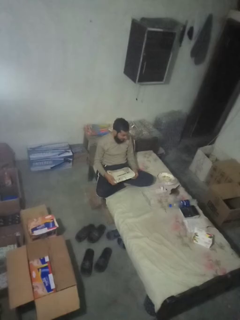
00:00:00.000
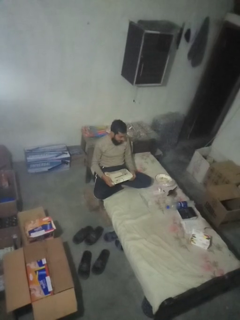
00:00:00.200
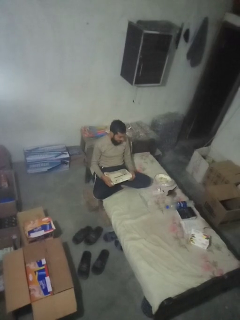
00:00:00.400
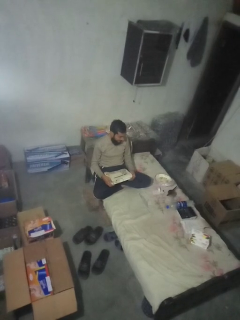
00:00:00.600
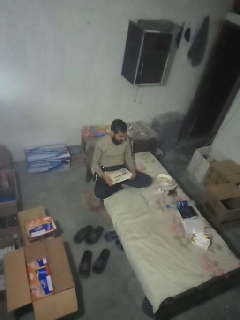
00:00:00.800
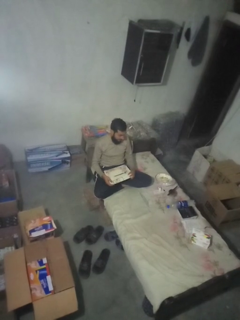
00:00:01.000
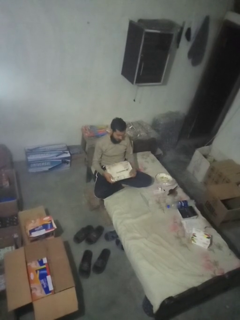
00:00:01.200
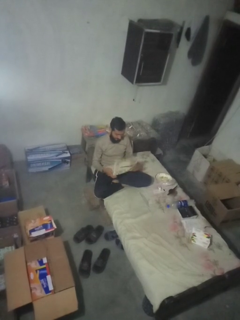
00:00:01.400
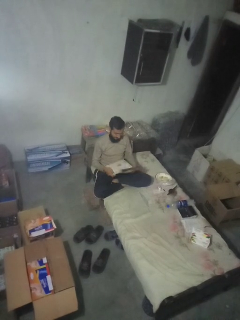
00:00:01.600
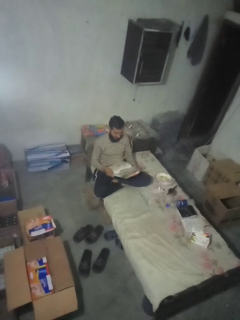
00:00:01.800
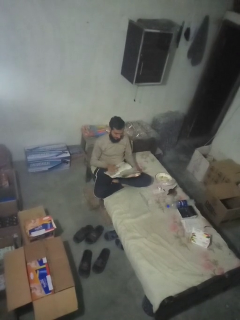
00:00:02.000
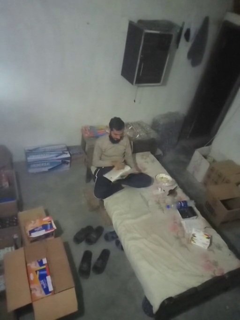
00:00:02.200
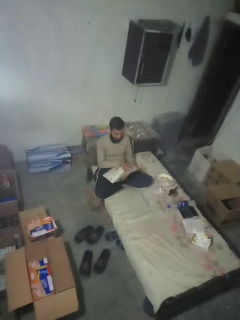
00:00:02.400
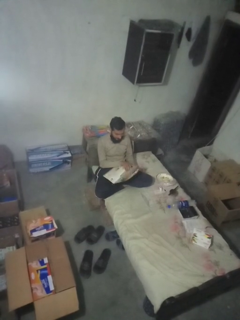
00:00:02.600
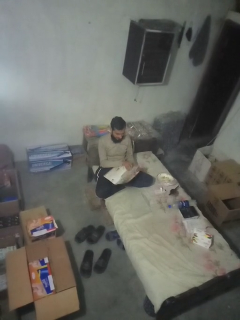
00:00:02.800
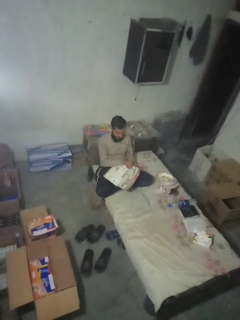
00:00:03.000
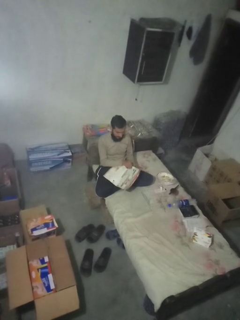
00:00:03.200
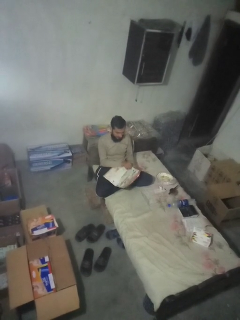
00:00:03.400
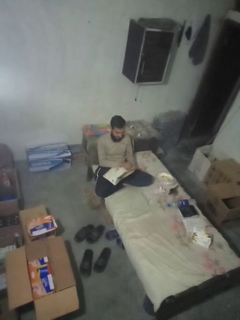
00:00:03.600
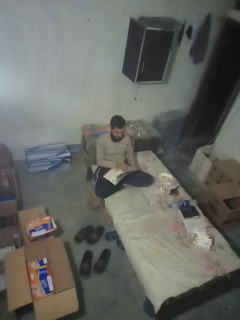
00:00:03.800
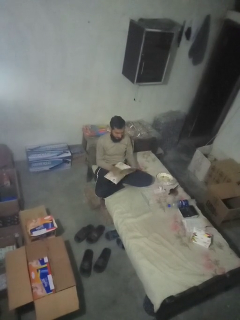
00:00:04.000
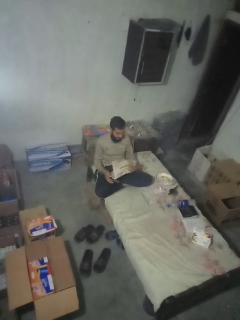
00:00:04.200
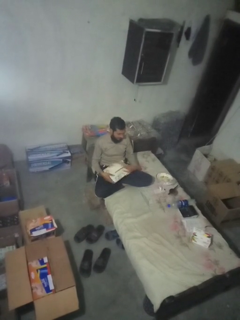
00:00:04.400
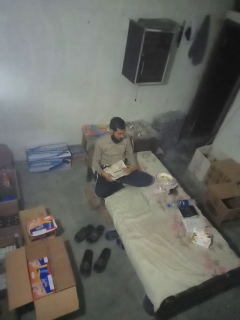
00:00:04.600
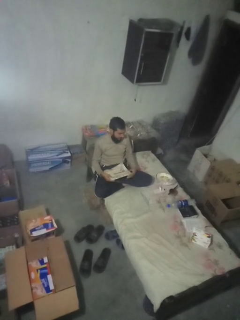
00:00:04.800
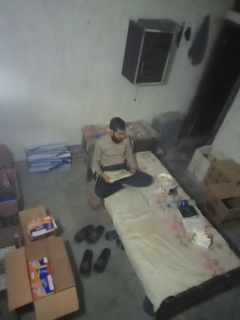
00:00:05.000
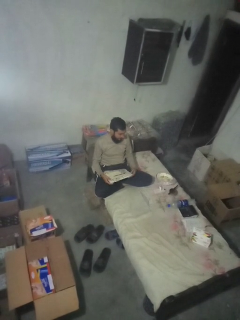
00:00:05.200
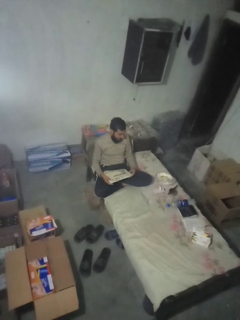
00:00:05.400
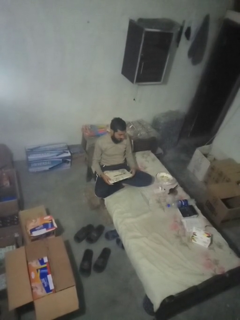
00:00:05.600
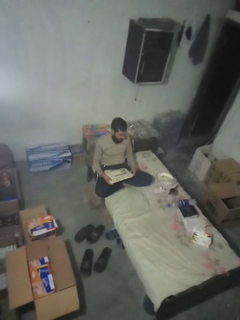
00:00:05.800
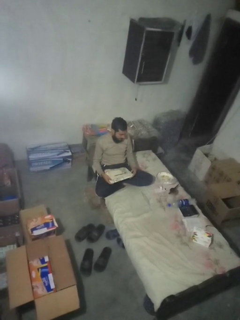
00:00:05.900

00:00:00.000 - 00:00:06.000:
person reads magazine

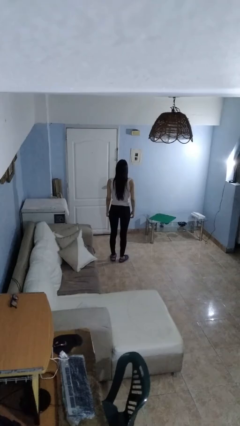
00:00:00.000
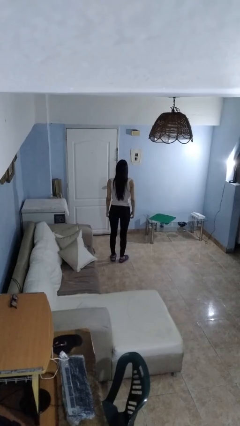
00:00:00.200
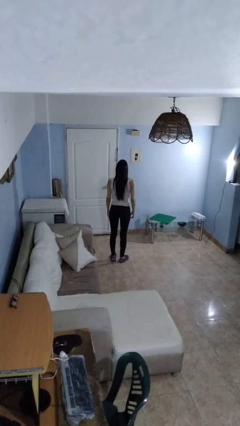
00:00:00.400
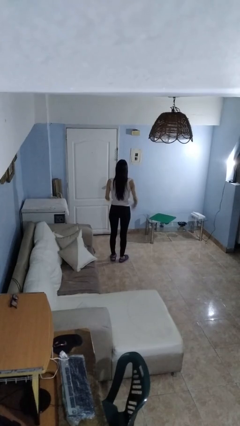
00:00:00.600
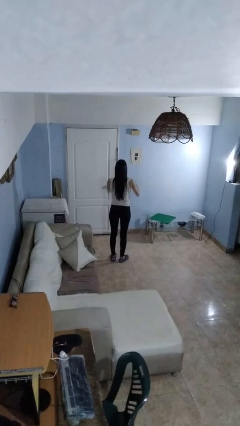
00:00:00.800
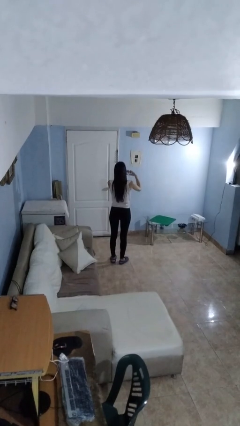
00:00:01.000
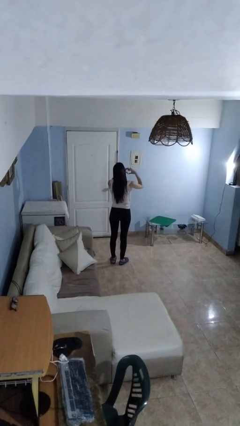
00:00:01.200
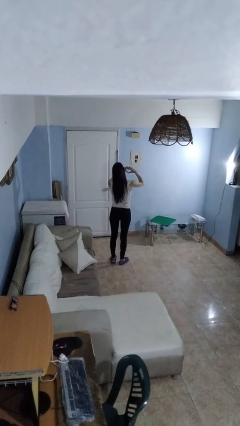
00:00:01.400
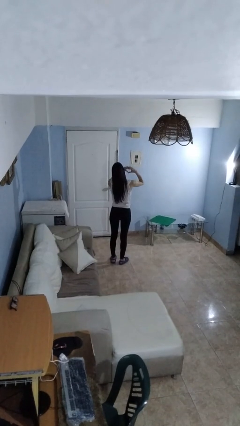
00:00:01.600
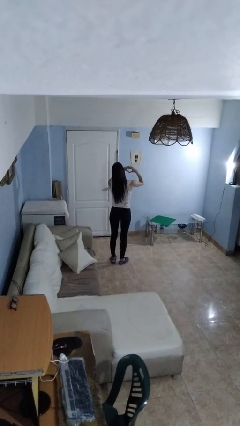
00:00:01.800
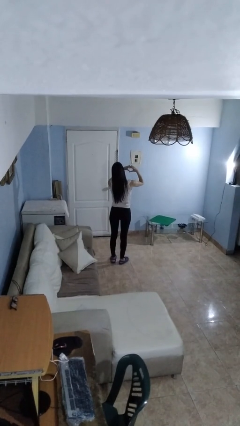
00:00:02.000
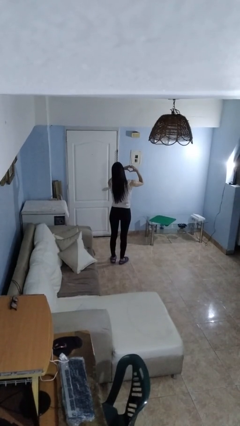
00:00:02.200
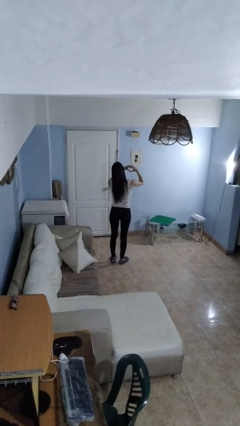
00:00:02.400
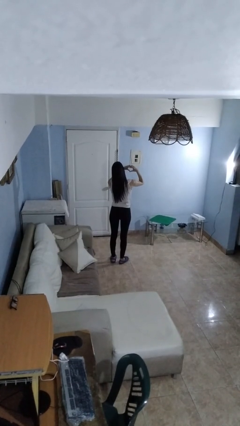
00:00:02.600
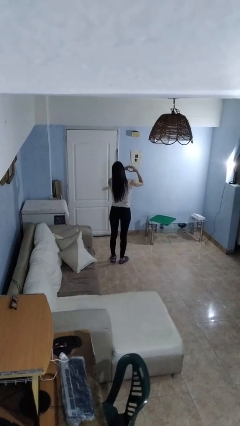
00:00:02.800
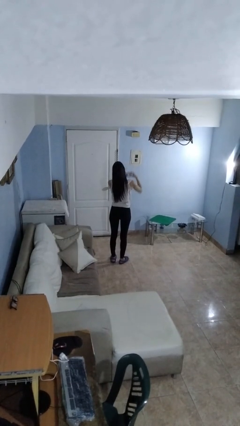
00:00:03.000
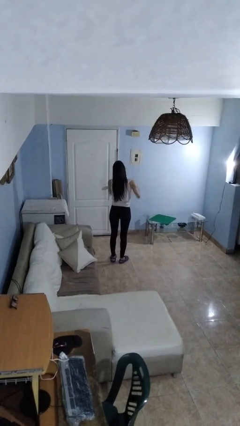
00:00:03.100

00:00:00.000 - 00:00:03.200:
person gestures heart

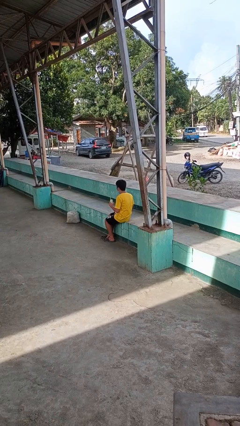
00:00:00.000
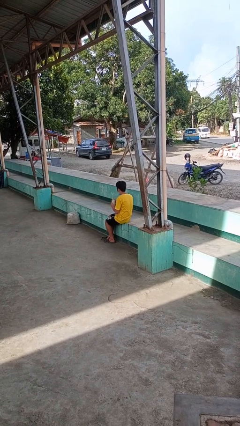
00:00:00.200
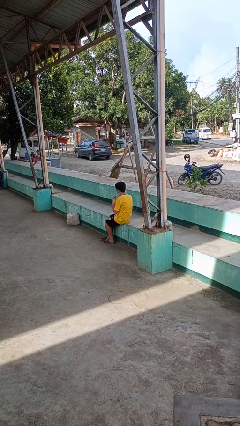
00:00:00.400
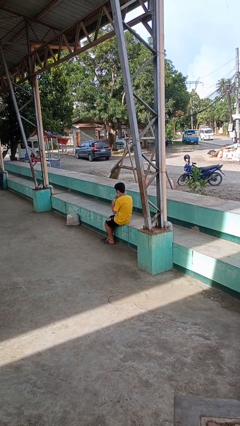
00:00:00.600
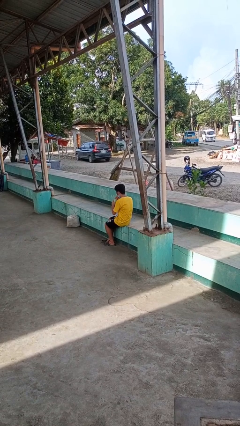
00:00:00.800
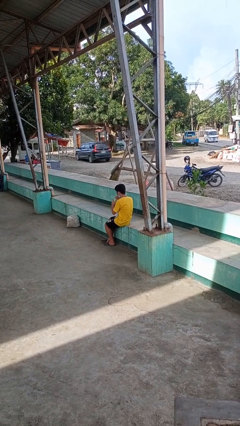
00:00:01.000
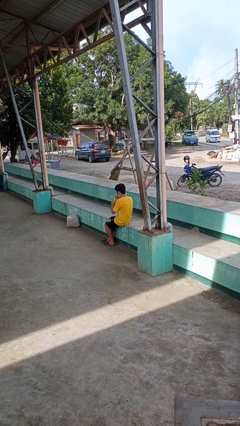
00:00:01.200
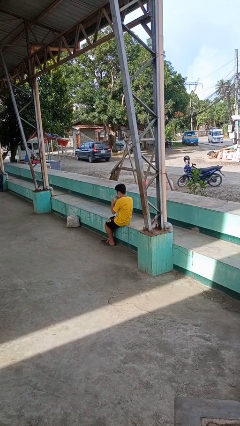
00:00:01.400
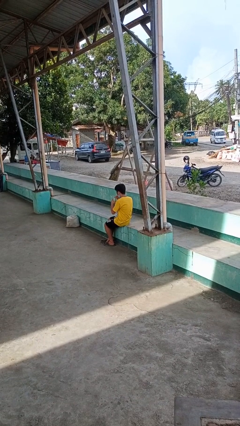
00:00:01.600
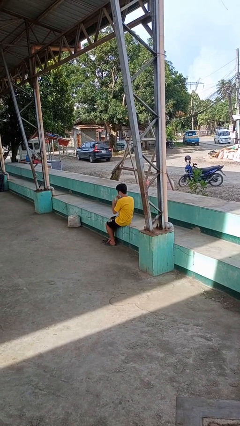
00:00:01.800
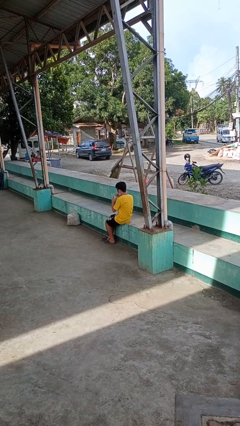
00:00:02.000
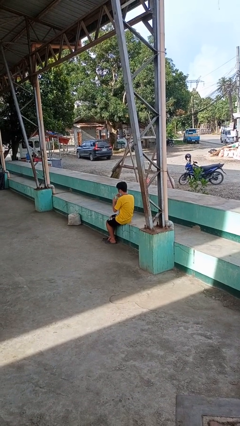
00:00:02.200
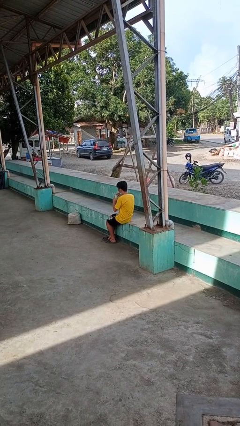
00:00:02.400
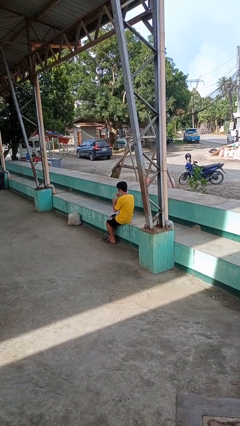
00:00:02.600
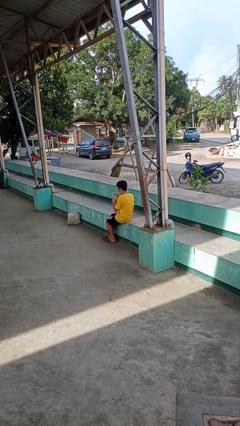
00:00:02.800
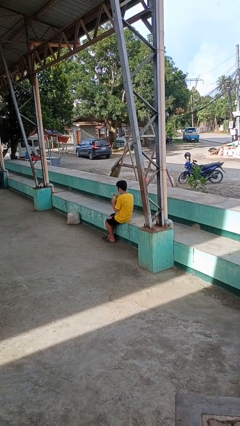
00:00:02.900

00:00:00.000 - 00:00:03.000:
person drinks from straw

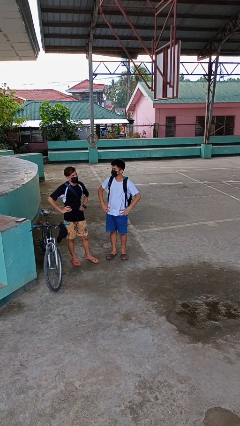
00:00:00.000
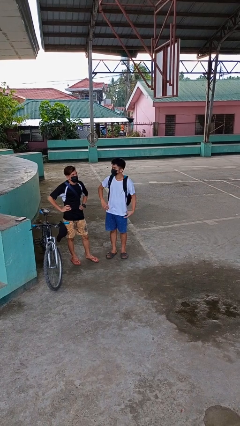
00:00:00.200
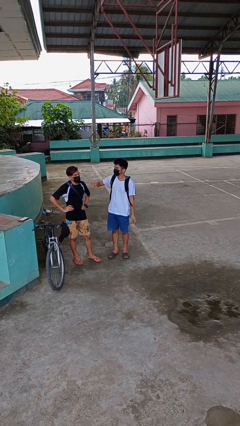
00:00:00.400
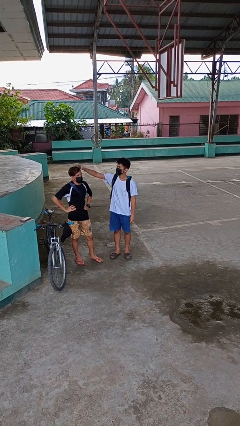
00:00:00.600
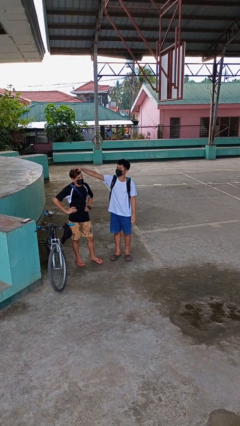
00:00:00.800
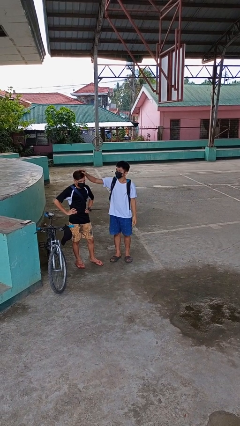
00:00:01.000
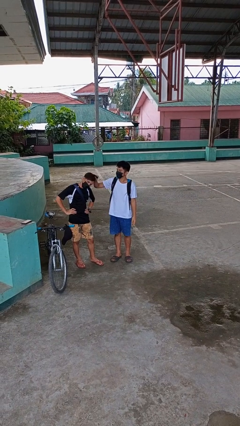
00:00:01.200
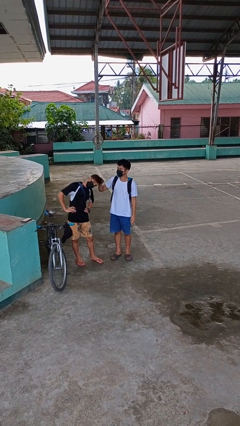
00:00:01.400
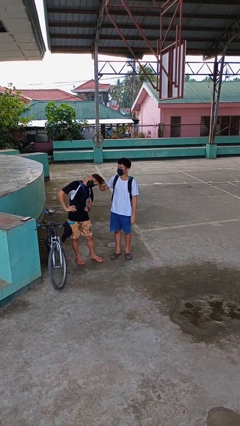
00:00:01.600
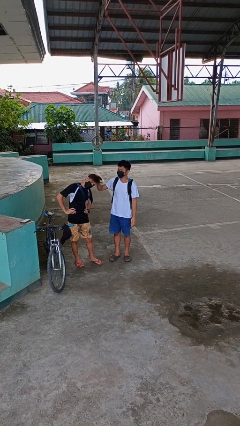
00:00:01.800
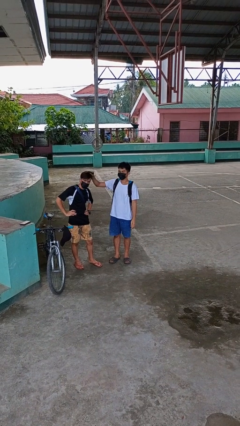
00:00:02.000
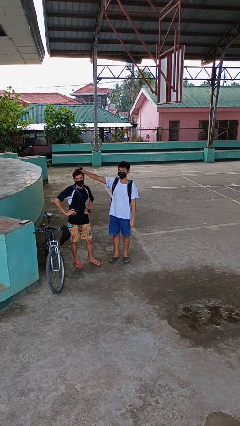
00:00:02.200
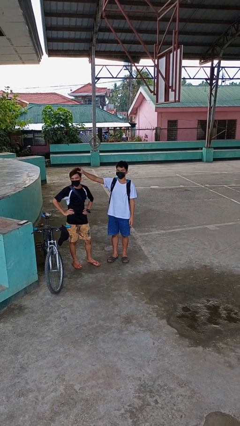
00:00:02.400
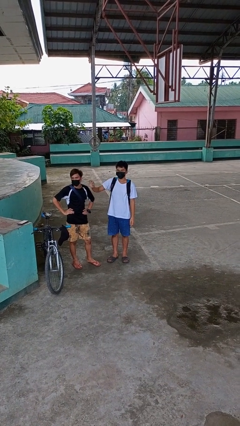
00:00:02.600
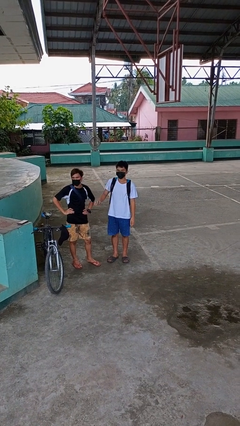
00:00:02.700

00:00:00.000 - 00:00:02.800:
person grabs person by hair

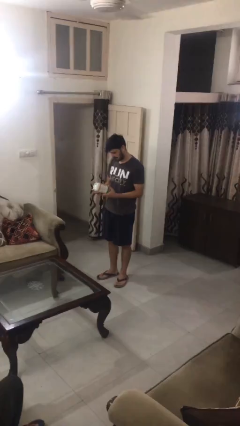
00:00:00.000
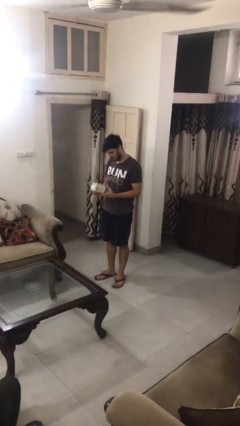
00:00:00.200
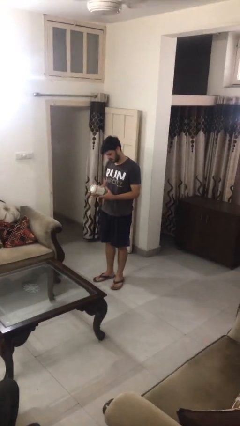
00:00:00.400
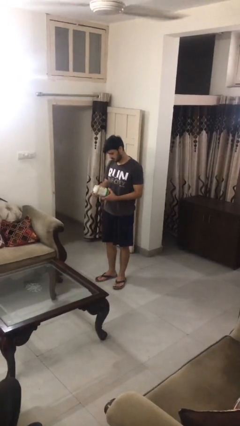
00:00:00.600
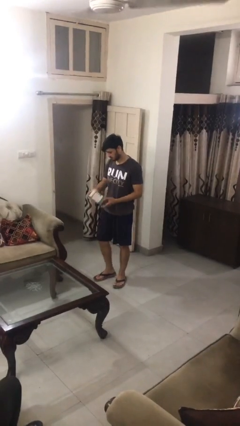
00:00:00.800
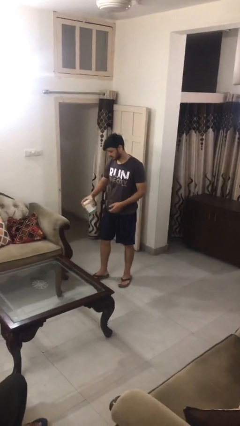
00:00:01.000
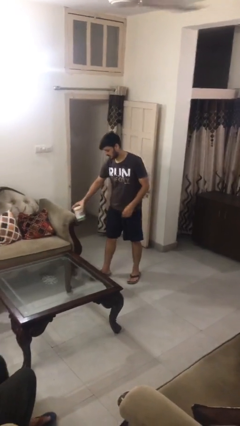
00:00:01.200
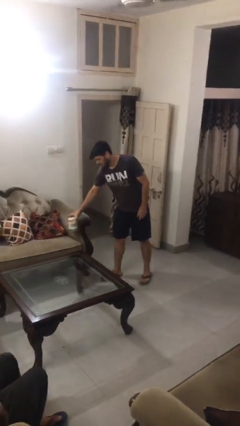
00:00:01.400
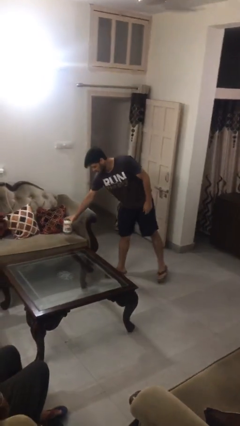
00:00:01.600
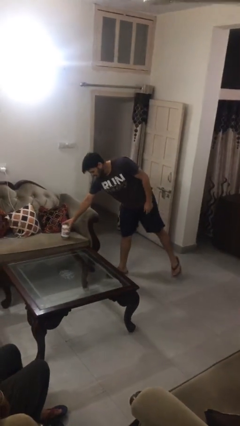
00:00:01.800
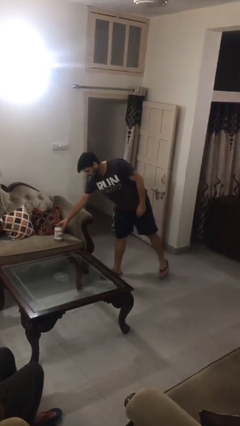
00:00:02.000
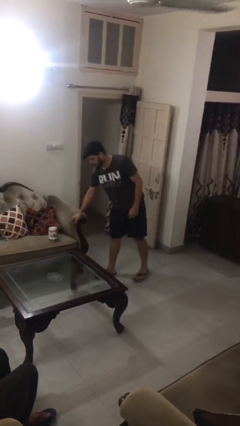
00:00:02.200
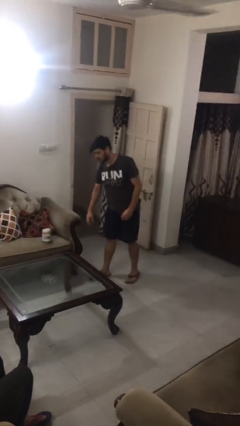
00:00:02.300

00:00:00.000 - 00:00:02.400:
person puts down object on couch

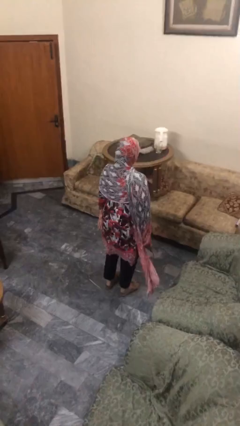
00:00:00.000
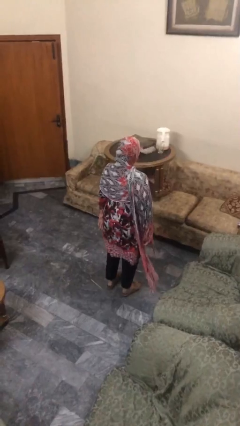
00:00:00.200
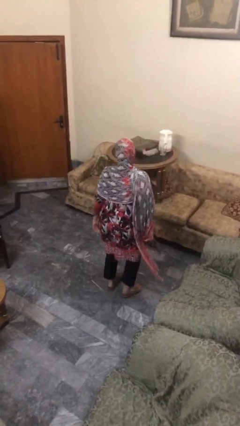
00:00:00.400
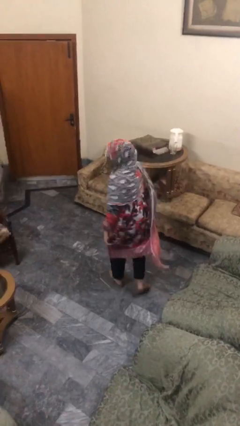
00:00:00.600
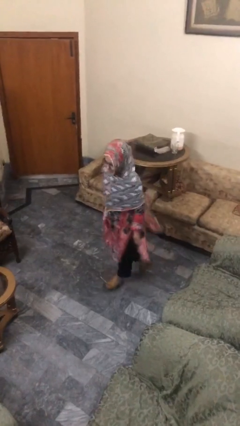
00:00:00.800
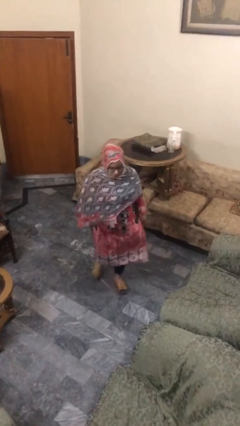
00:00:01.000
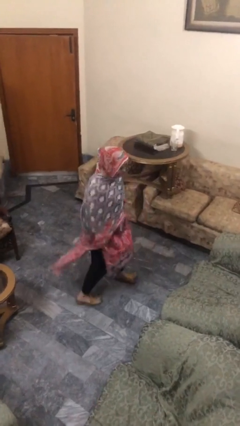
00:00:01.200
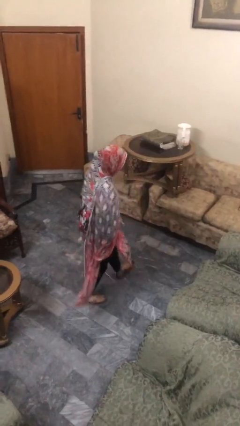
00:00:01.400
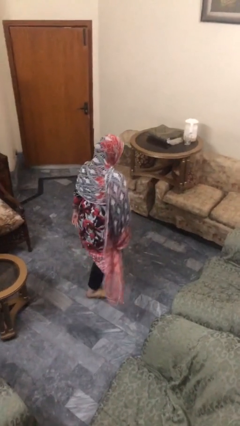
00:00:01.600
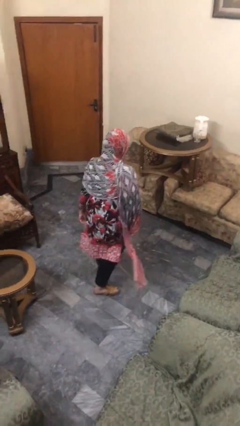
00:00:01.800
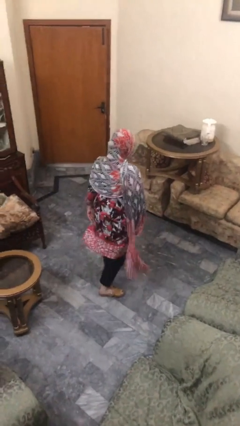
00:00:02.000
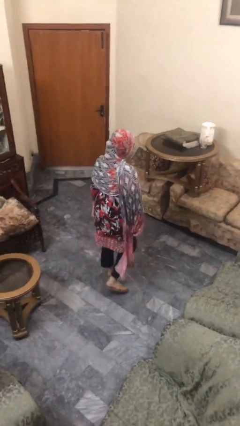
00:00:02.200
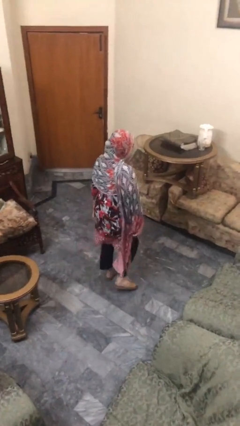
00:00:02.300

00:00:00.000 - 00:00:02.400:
person twirls
